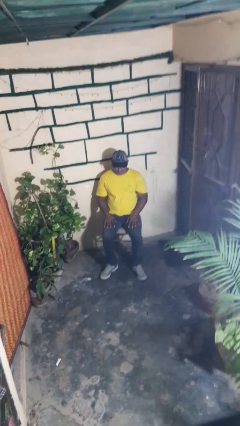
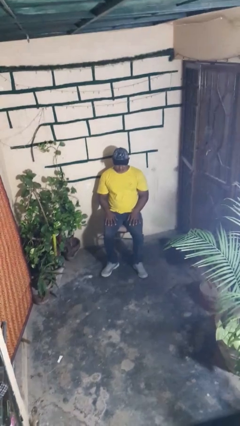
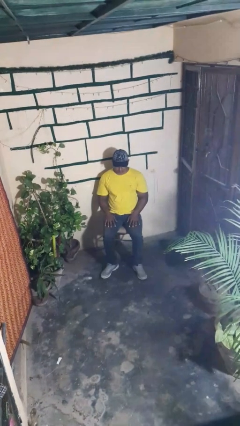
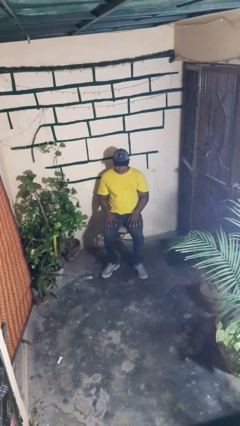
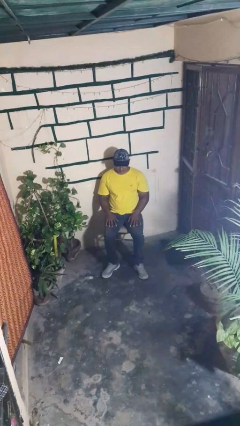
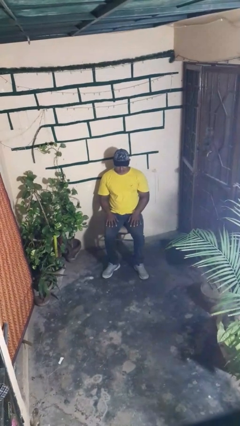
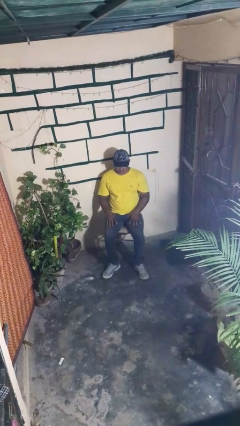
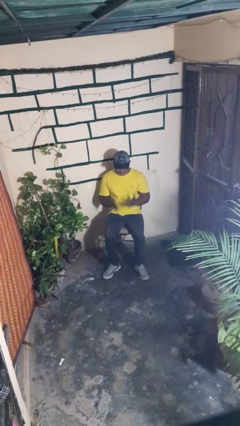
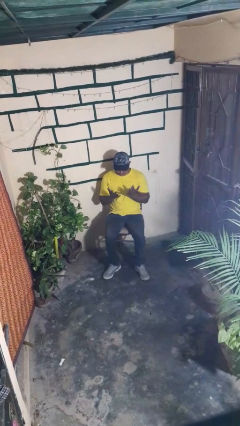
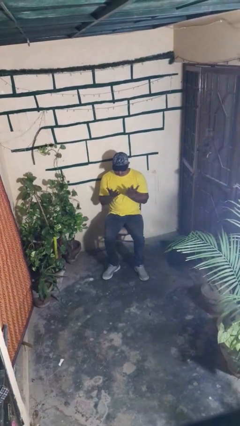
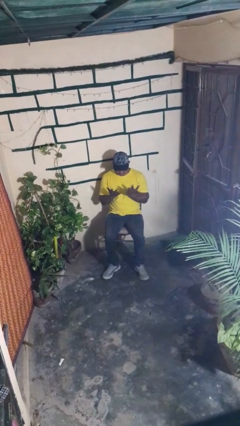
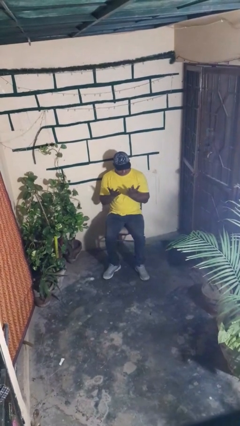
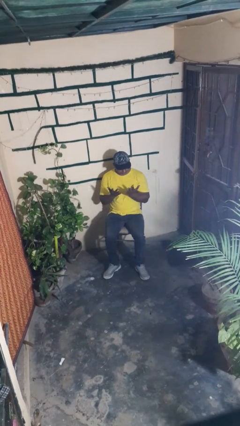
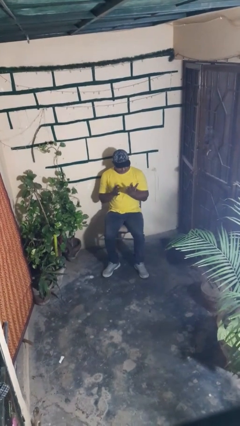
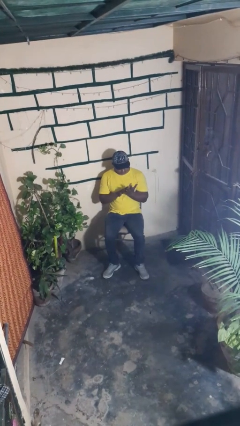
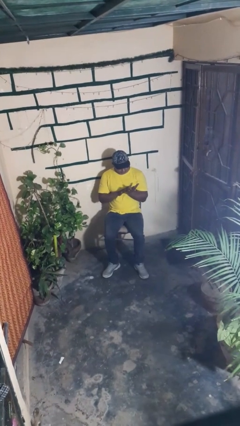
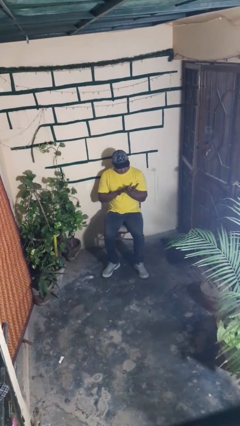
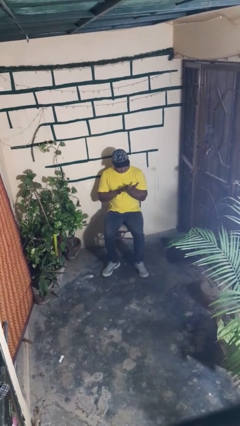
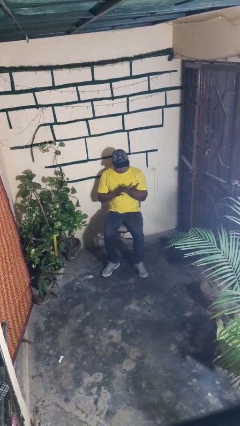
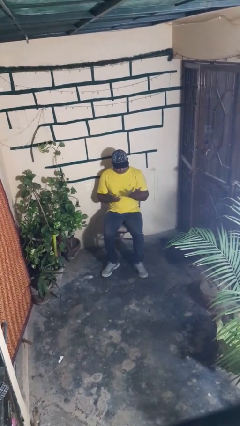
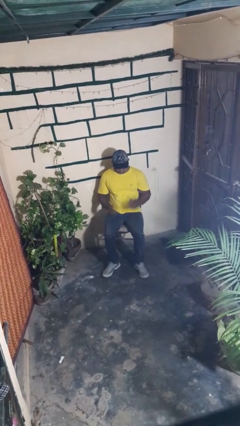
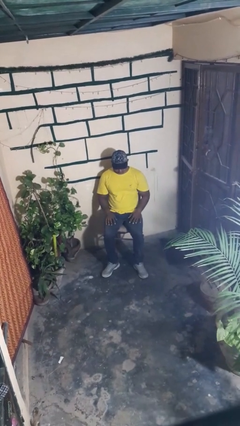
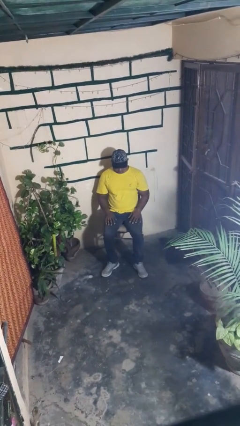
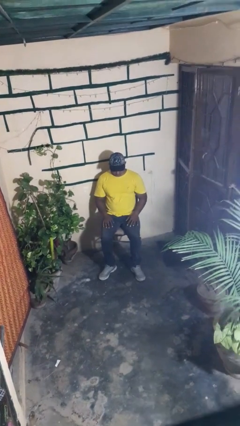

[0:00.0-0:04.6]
person looks at hands in lap

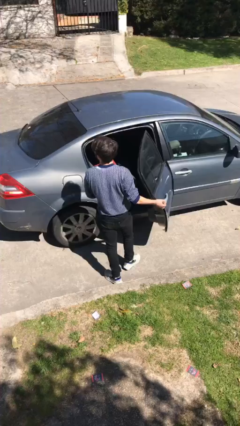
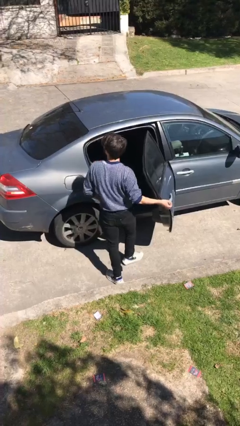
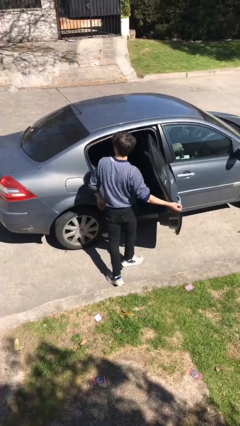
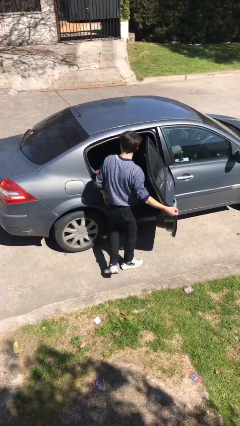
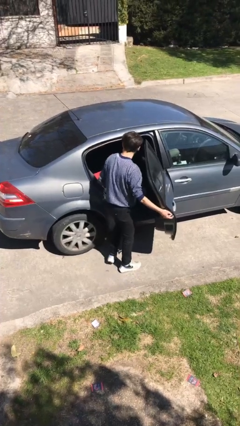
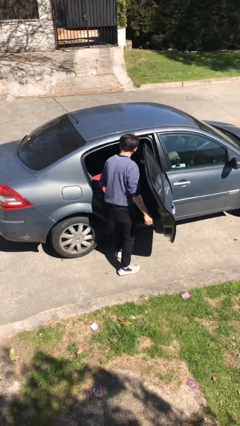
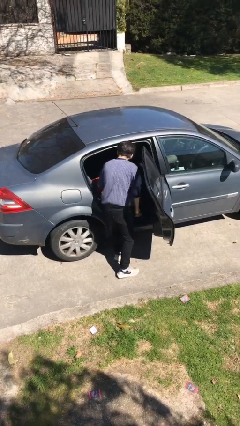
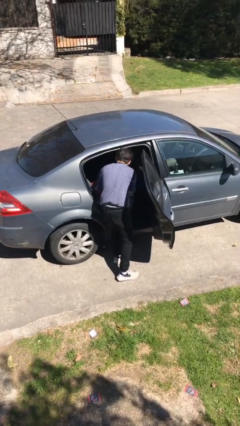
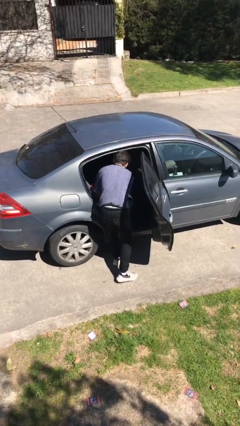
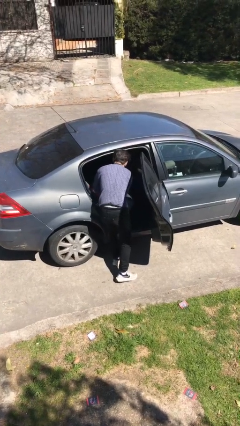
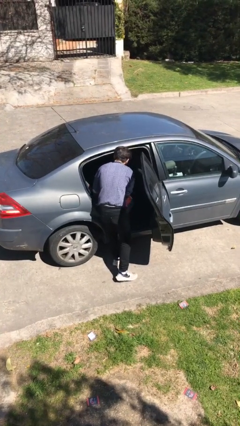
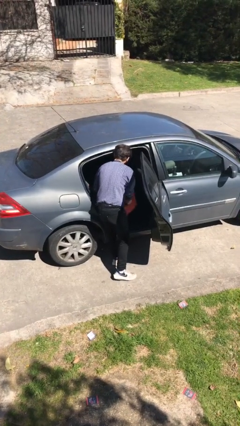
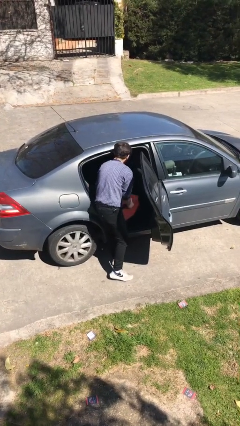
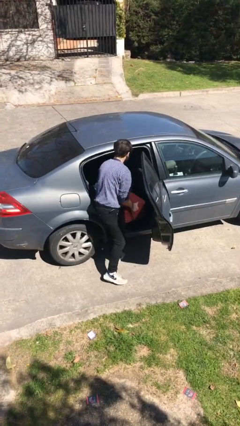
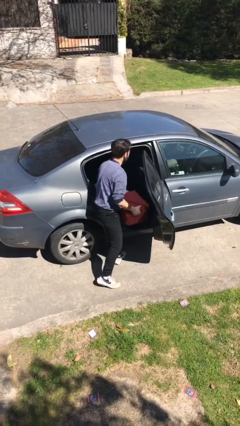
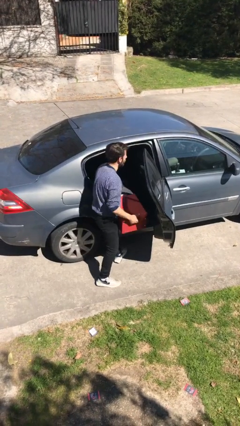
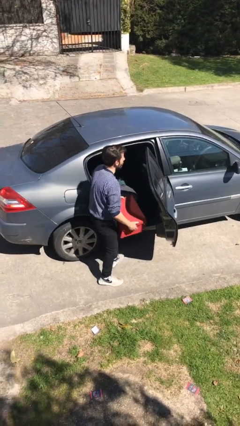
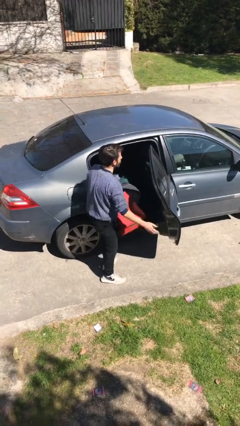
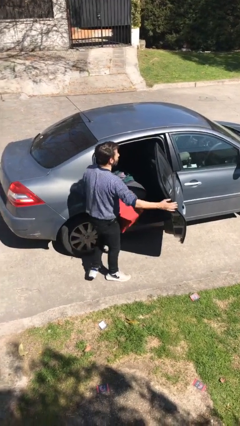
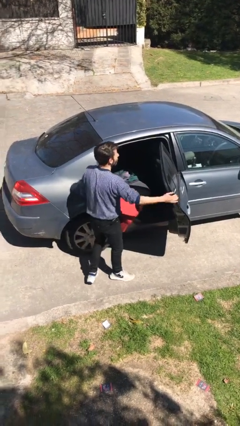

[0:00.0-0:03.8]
person unloads car

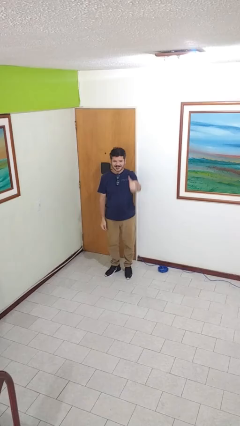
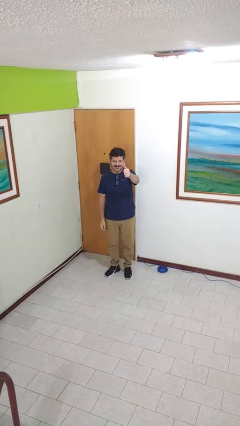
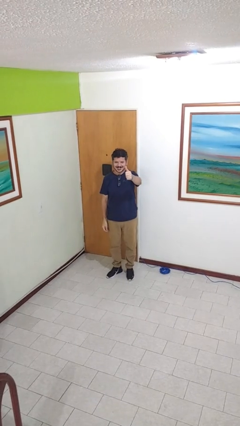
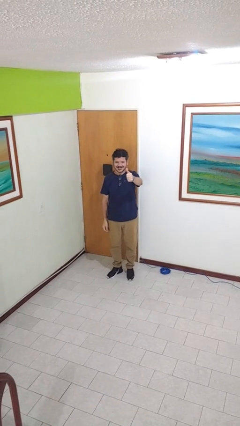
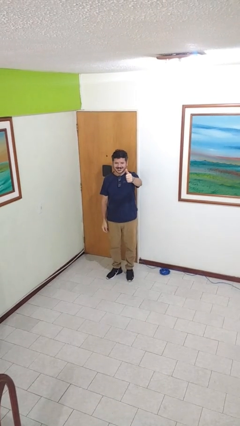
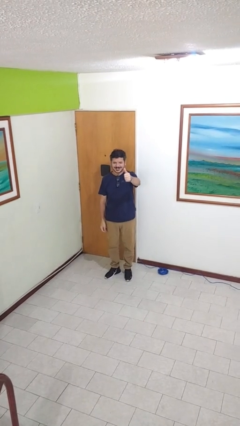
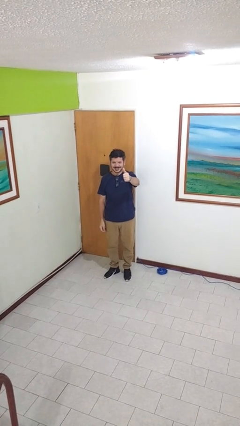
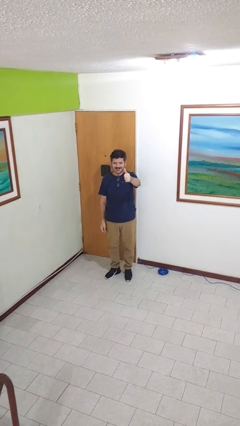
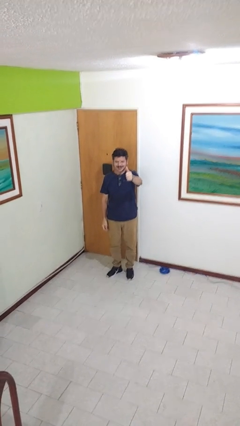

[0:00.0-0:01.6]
person gestures thumbs up

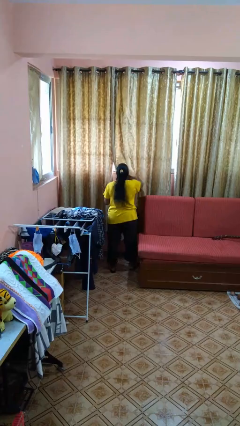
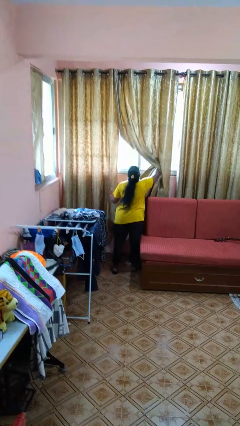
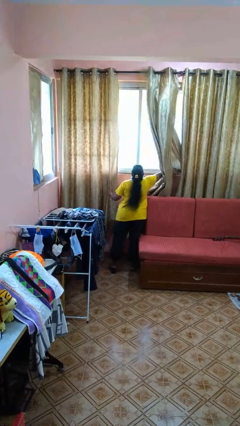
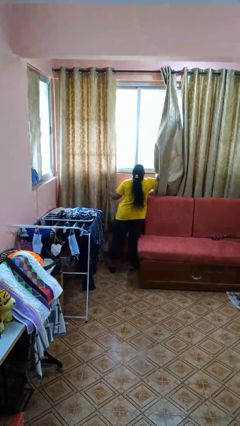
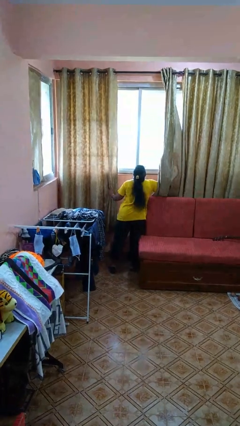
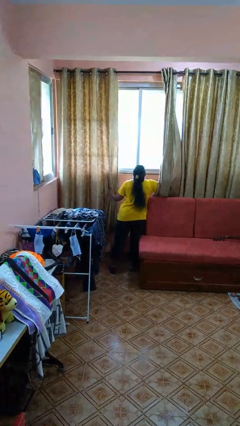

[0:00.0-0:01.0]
person opens curtains

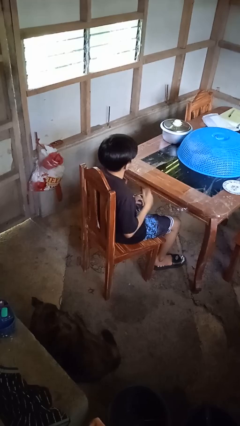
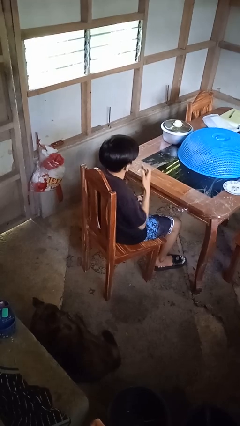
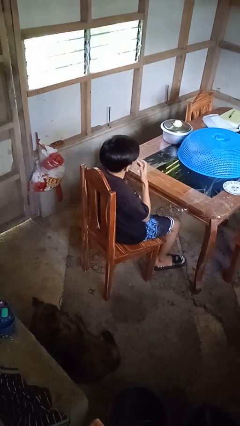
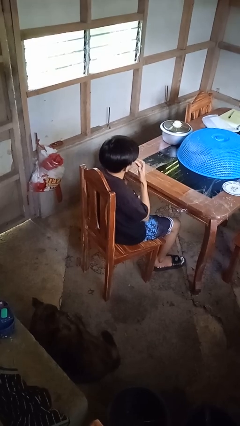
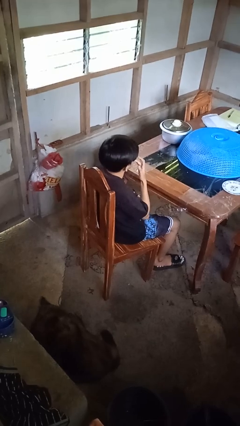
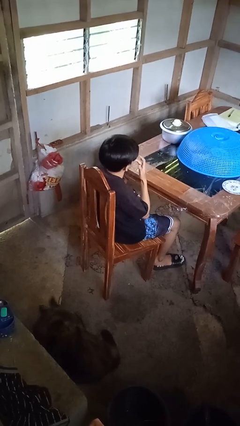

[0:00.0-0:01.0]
person licks fingers

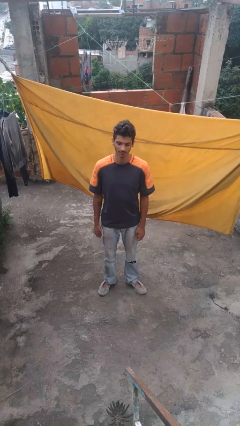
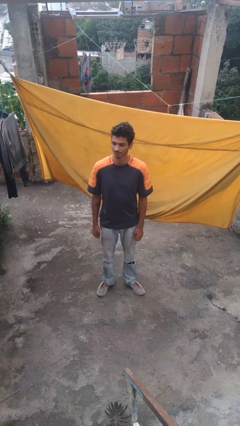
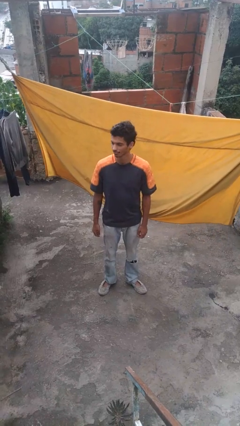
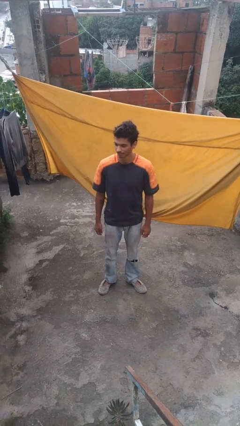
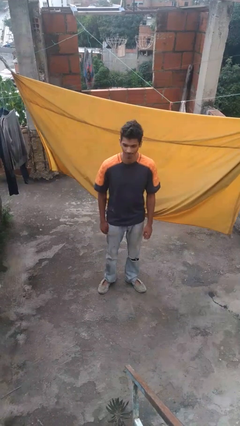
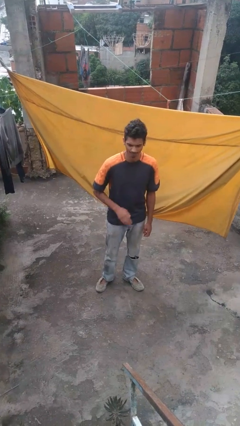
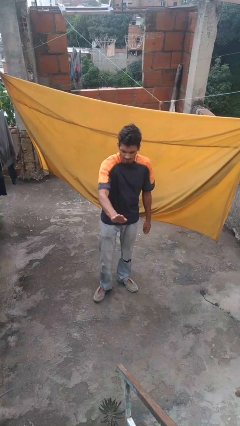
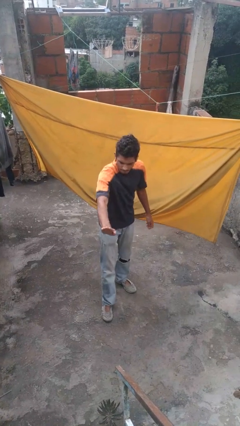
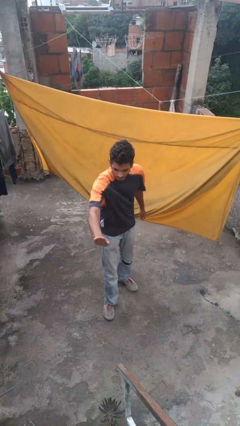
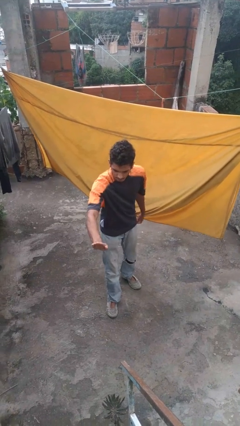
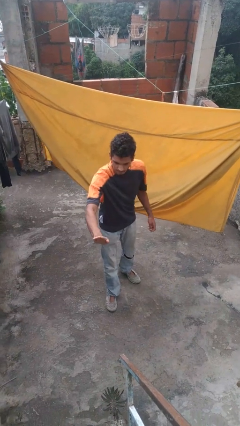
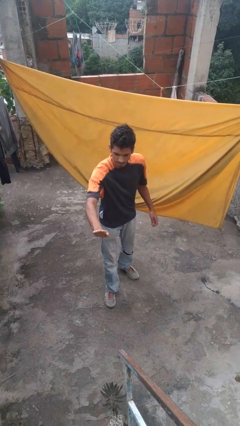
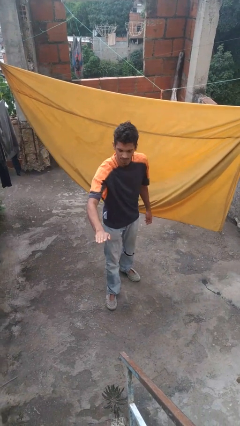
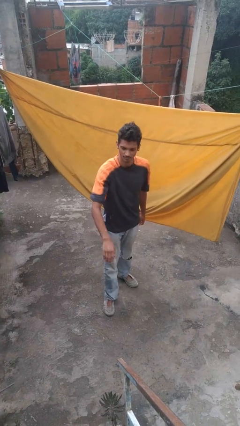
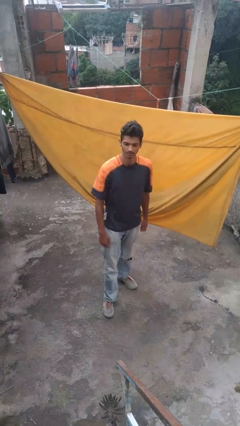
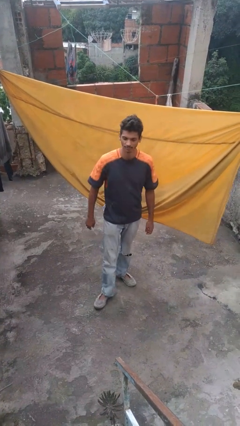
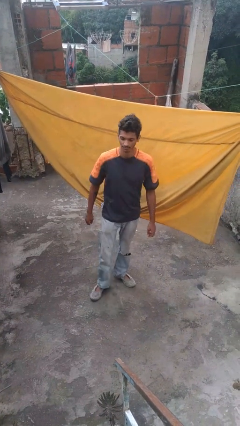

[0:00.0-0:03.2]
person gestures stop

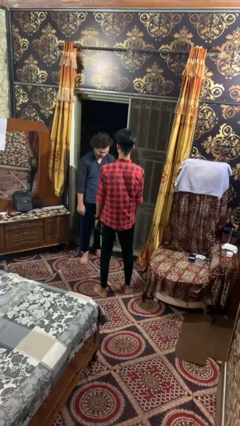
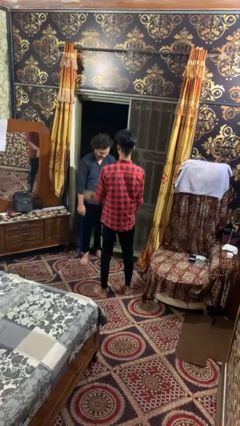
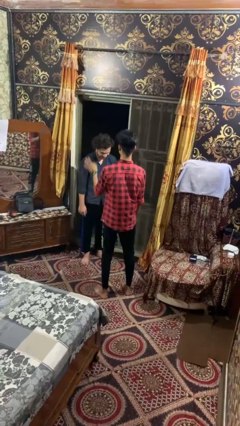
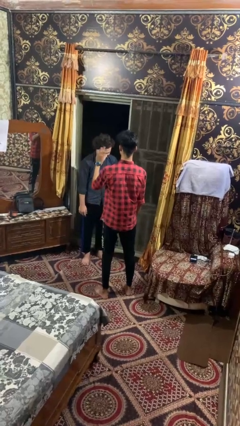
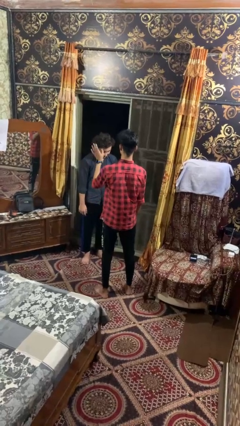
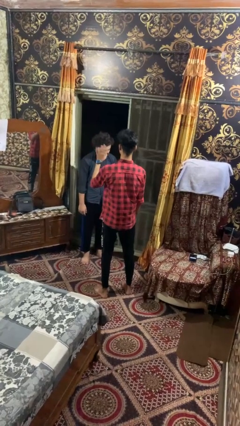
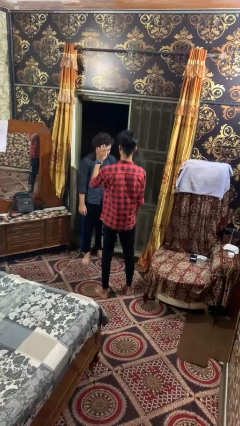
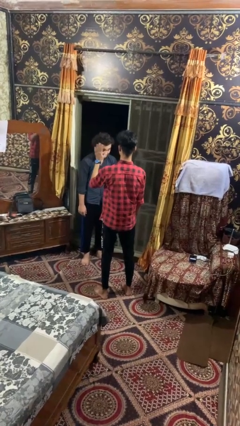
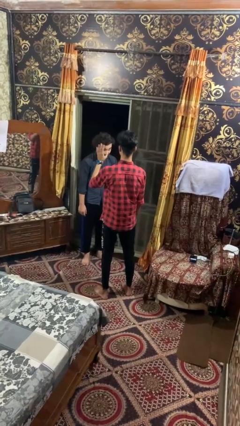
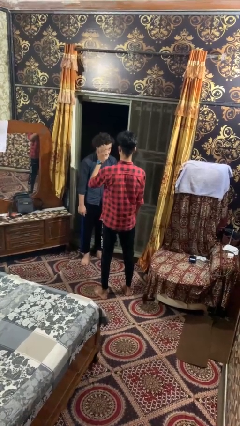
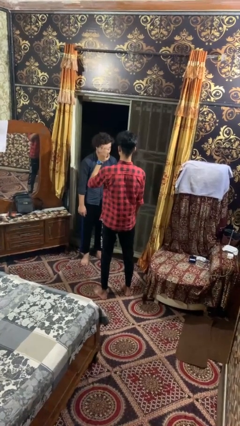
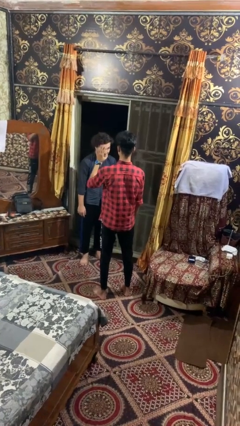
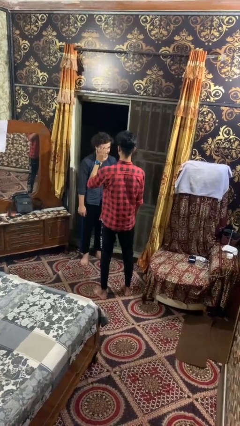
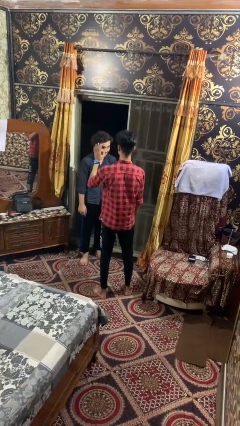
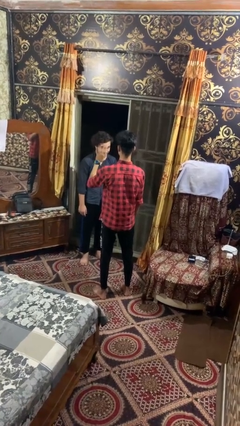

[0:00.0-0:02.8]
person waves at person
